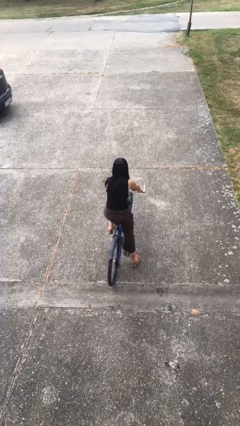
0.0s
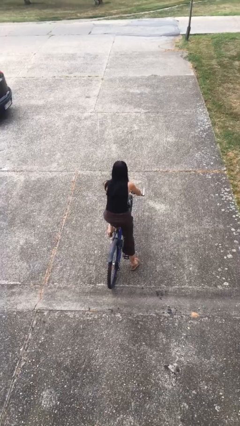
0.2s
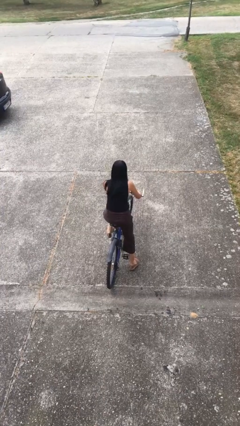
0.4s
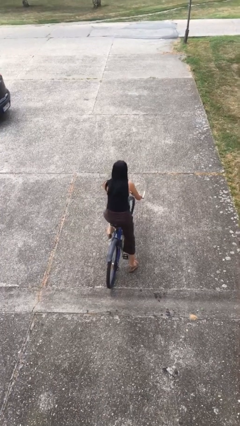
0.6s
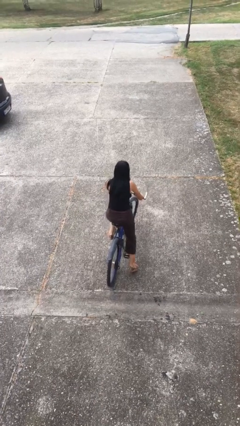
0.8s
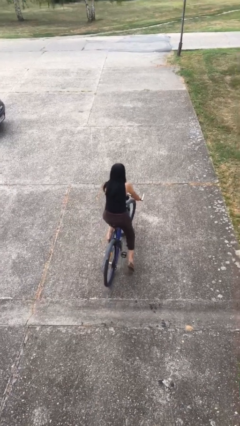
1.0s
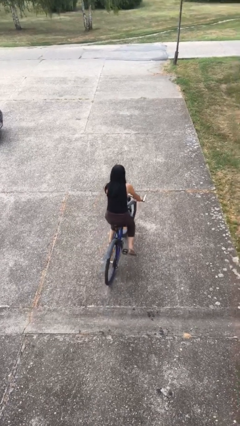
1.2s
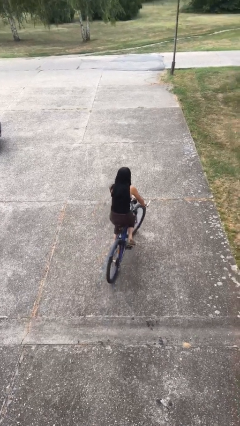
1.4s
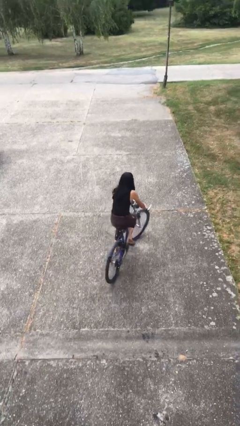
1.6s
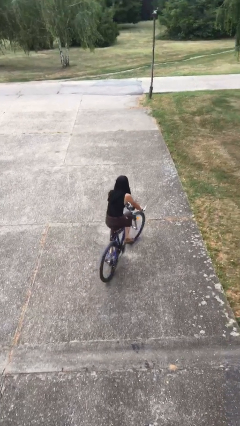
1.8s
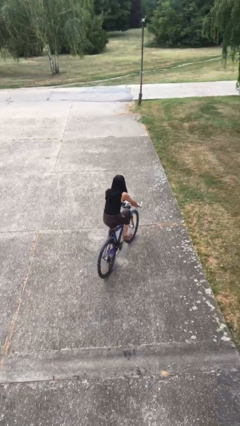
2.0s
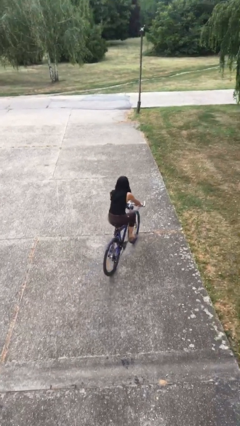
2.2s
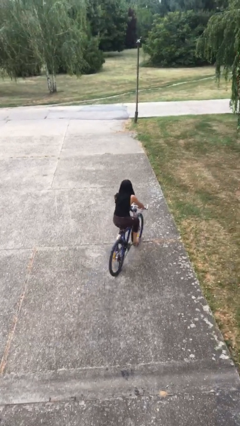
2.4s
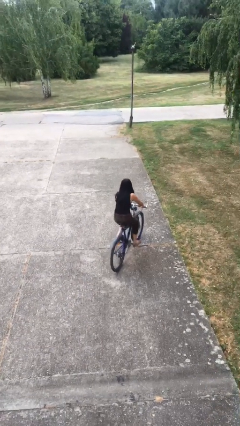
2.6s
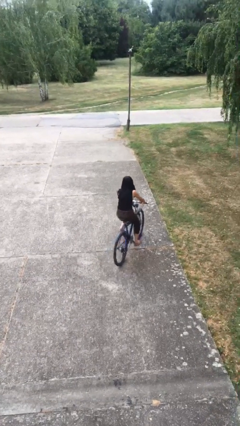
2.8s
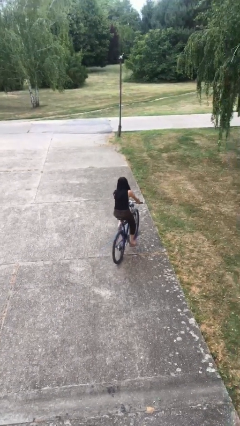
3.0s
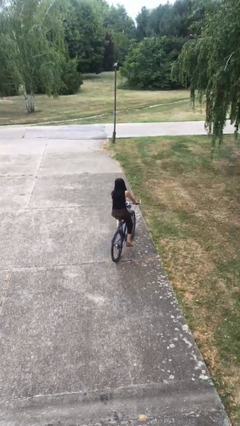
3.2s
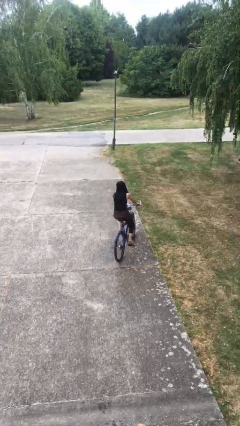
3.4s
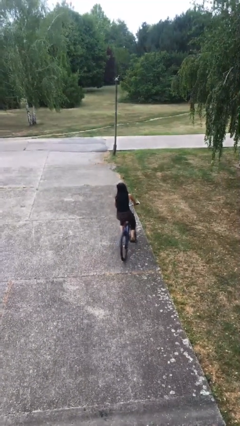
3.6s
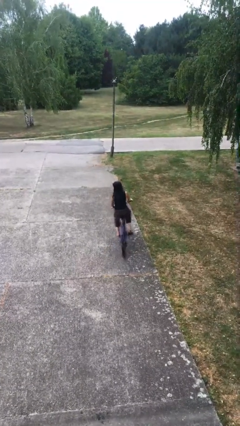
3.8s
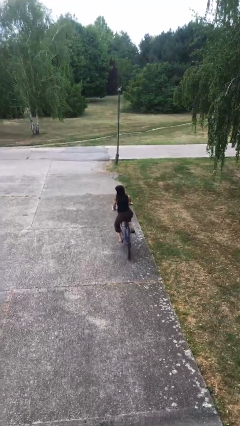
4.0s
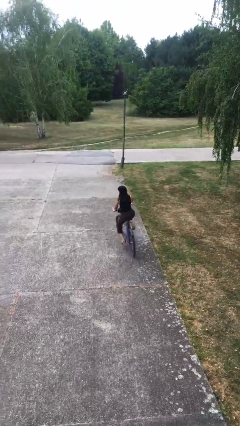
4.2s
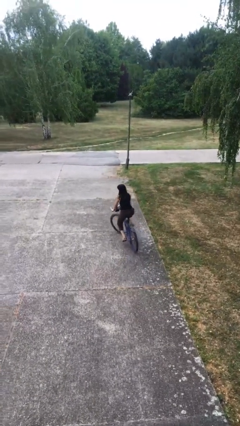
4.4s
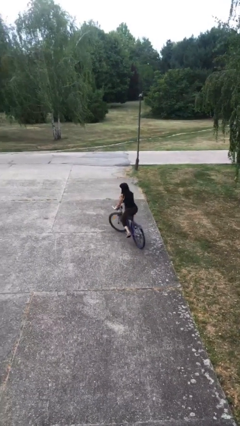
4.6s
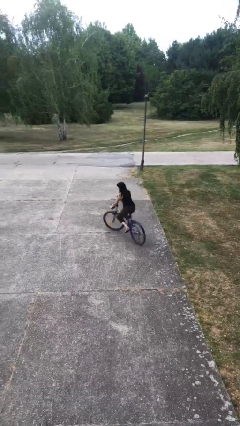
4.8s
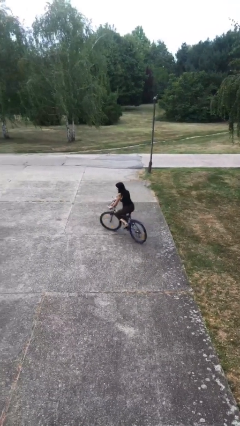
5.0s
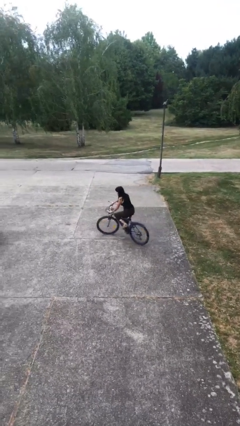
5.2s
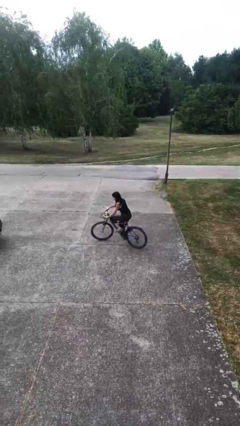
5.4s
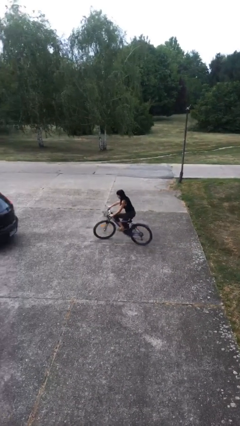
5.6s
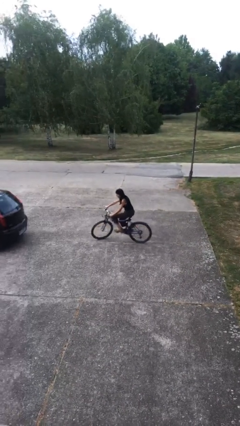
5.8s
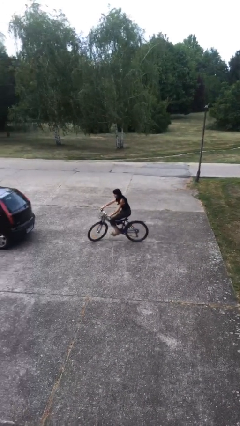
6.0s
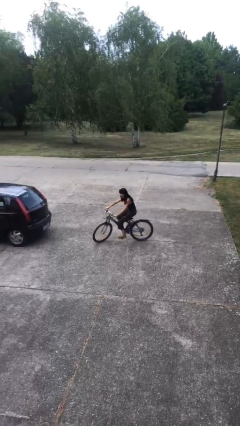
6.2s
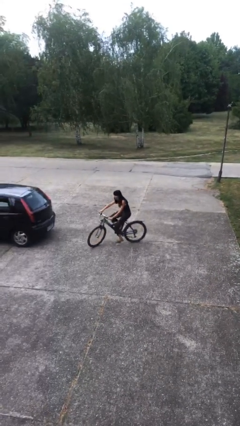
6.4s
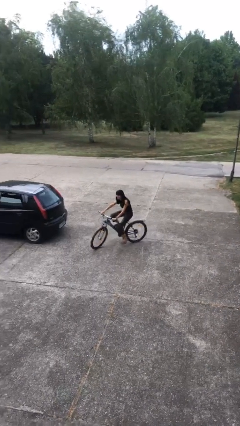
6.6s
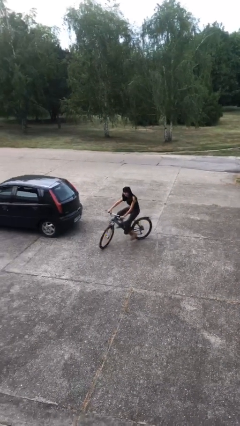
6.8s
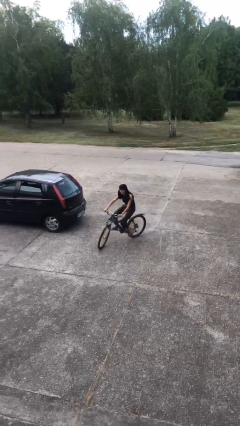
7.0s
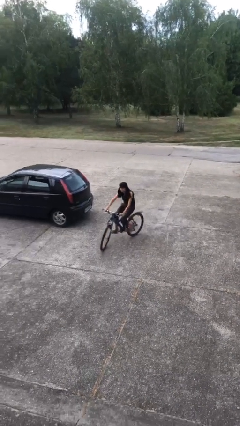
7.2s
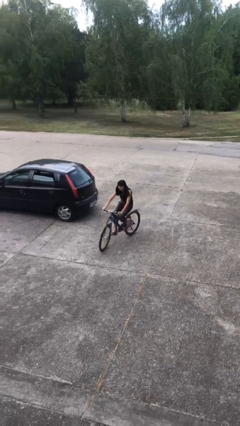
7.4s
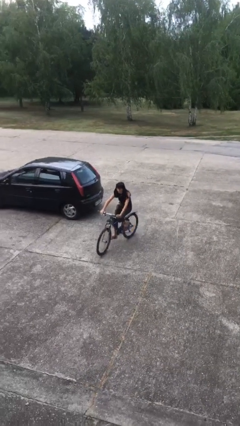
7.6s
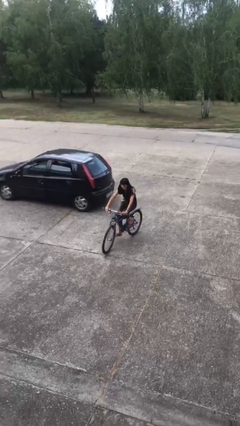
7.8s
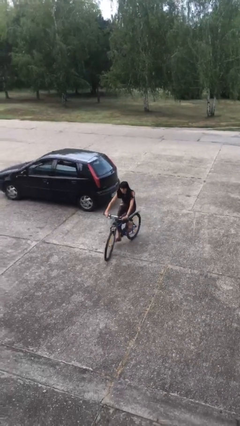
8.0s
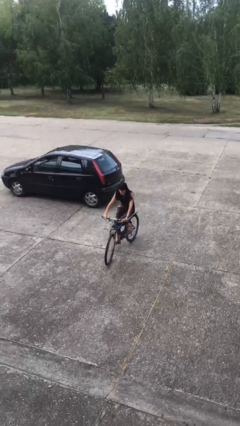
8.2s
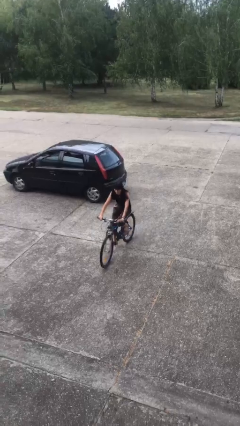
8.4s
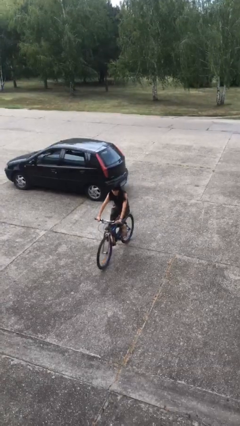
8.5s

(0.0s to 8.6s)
person rides bicycle

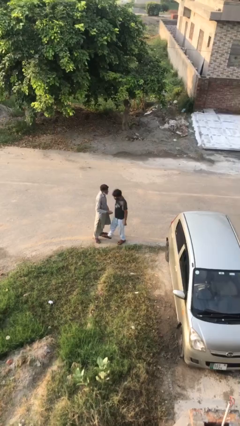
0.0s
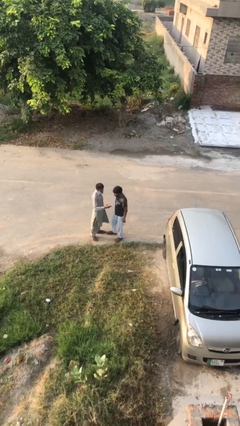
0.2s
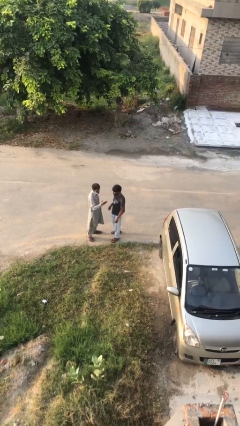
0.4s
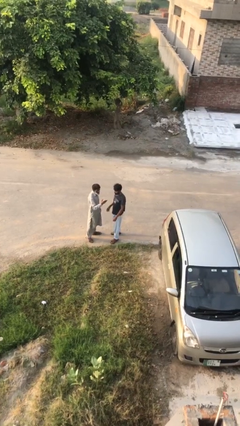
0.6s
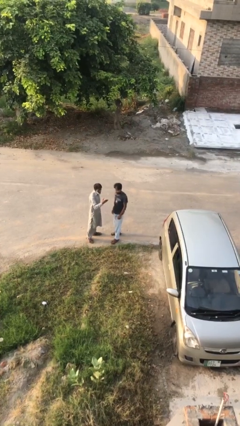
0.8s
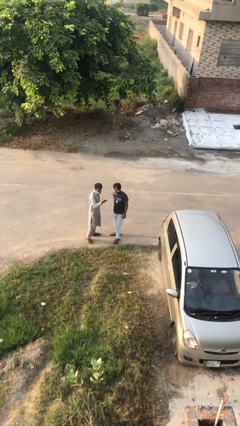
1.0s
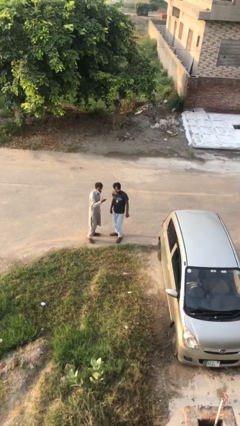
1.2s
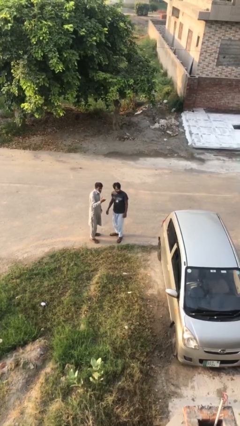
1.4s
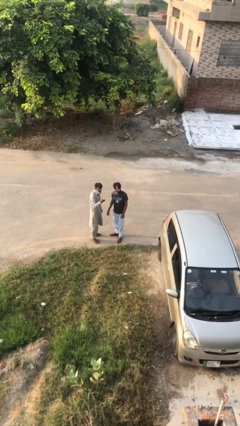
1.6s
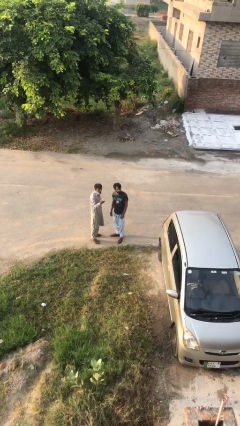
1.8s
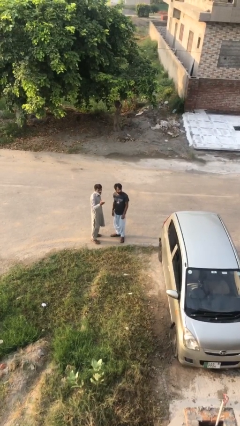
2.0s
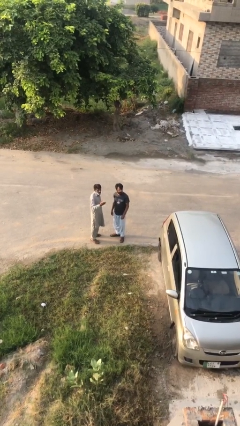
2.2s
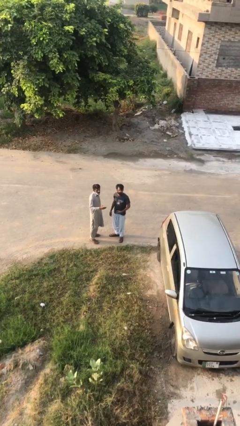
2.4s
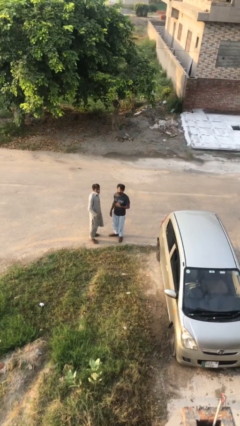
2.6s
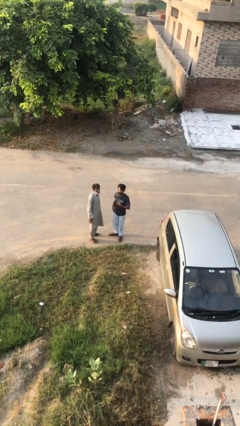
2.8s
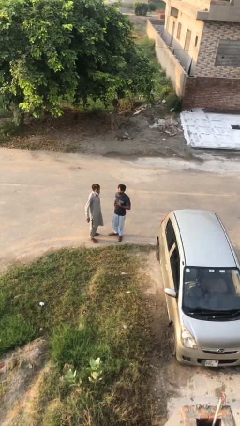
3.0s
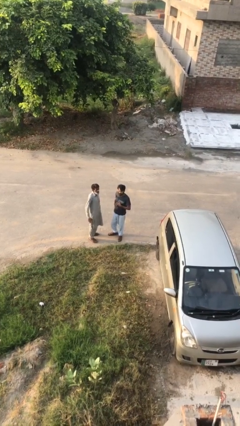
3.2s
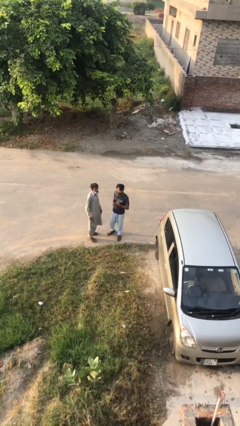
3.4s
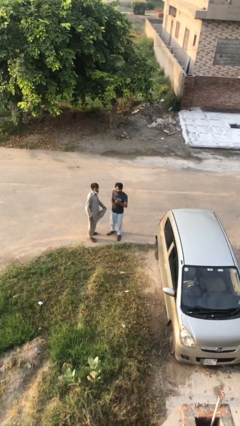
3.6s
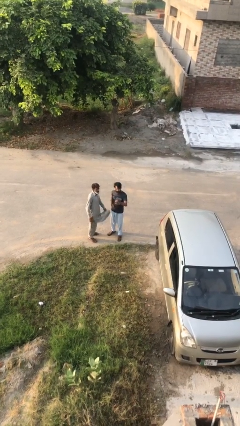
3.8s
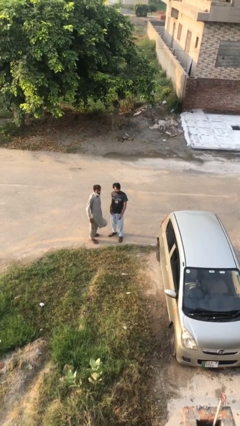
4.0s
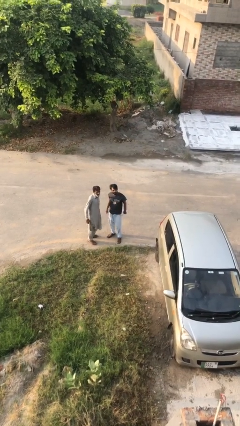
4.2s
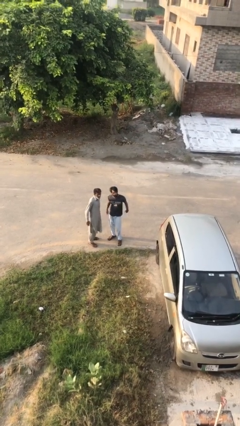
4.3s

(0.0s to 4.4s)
person talks to person

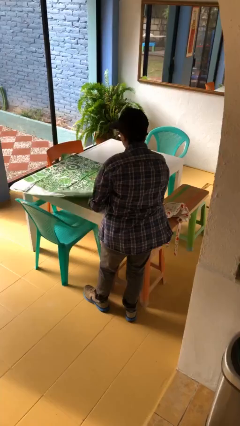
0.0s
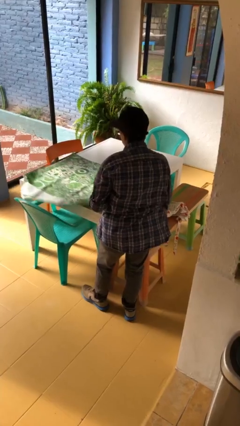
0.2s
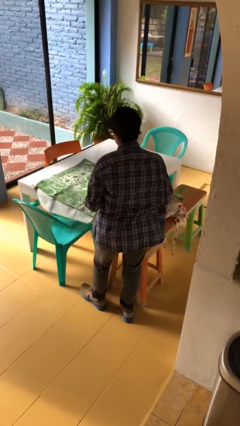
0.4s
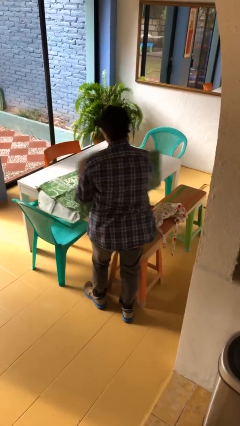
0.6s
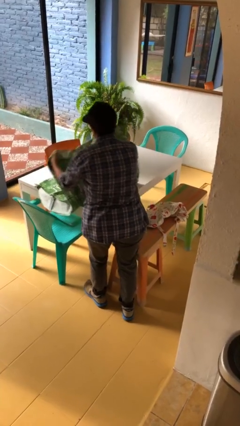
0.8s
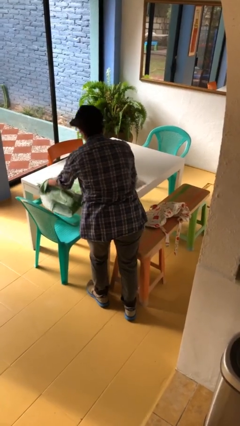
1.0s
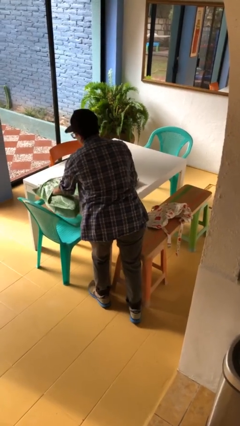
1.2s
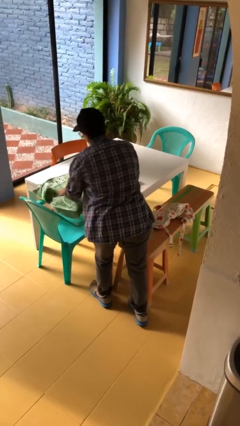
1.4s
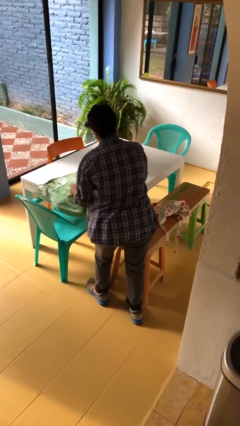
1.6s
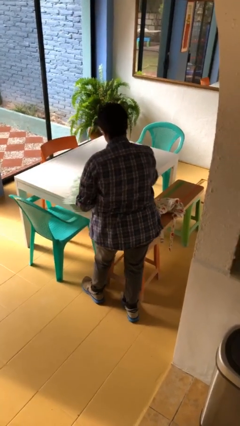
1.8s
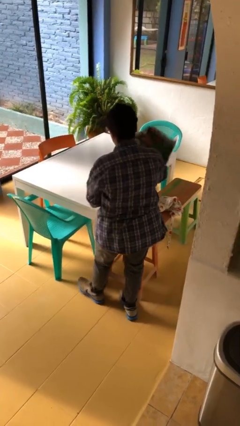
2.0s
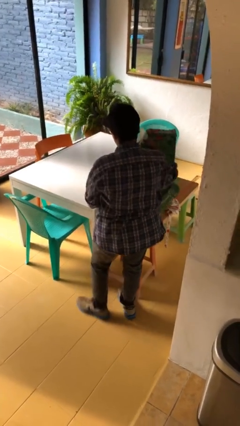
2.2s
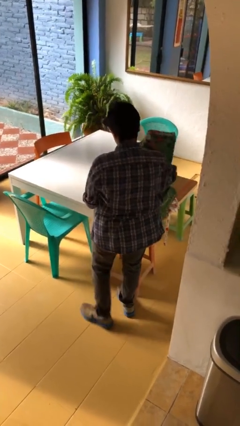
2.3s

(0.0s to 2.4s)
person folds tablecloth

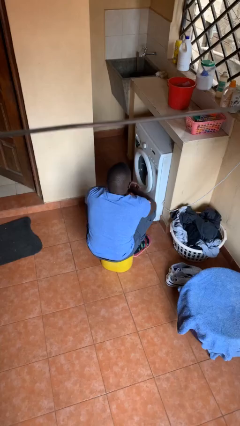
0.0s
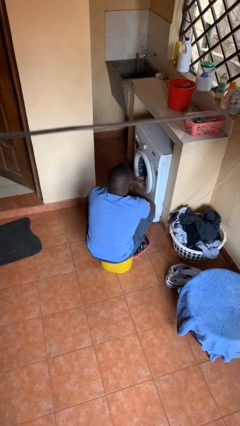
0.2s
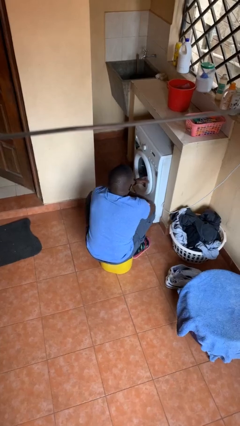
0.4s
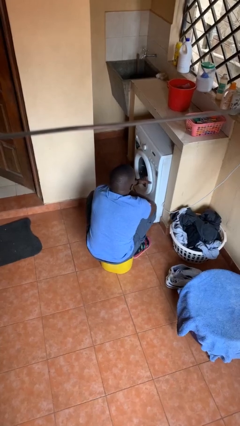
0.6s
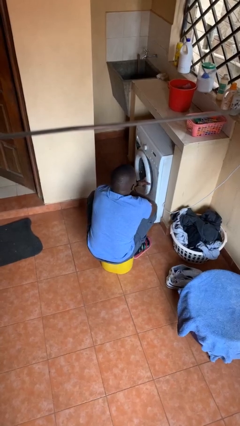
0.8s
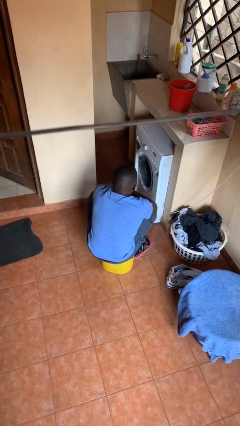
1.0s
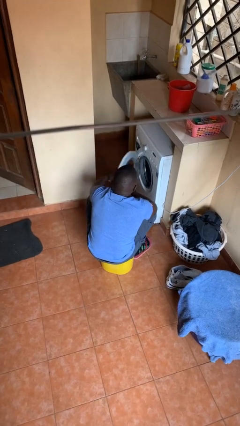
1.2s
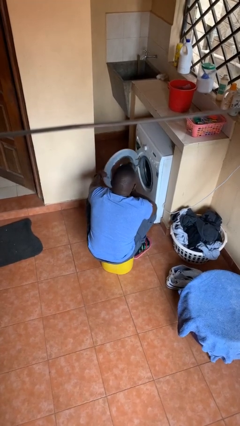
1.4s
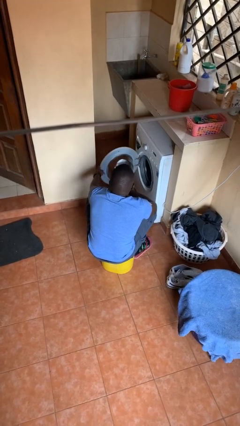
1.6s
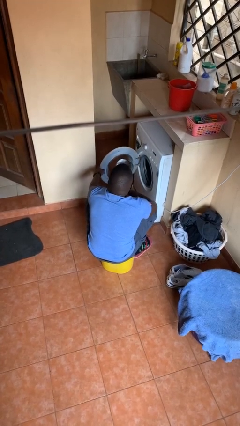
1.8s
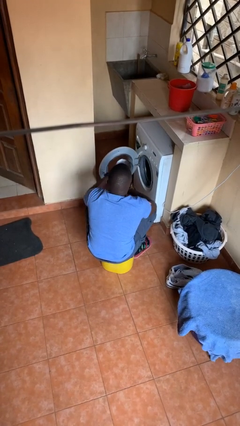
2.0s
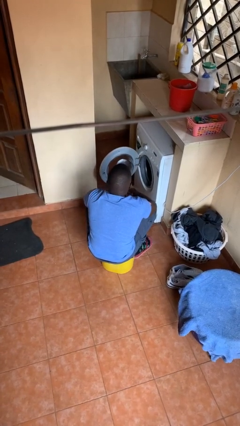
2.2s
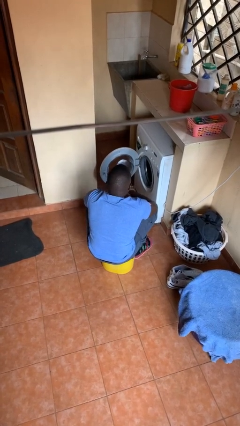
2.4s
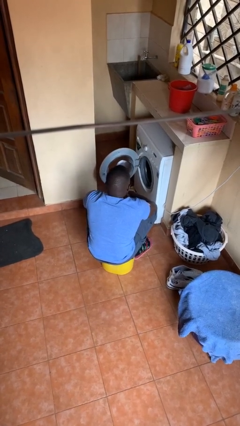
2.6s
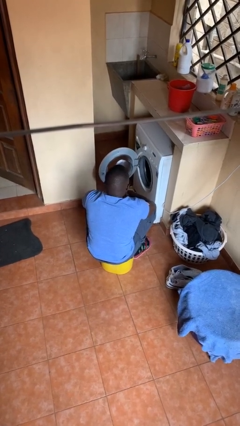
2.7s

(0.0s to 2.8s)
person opens clothes washer
